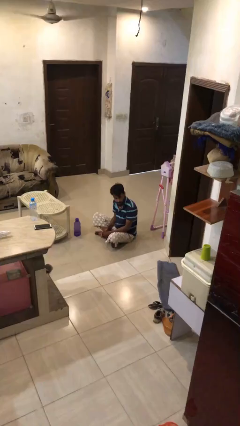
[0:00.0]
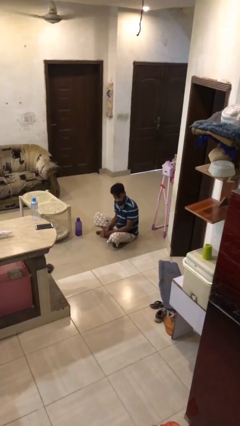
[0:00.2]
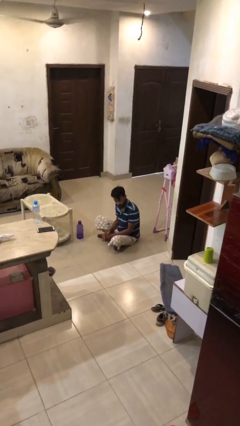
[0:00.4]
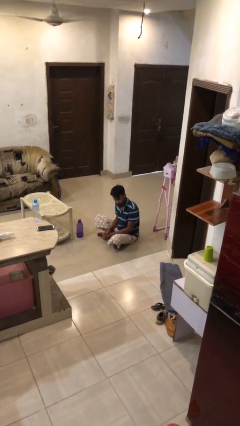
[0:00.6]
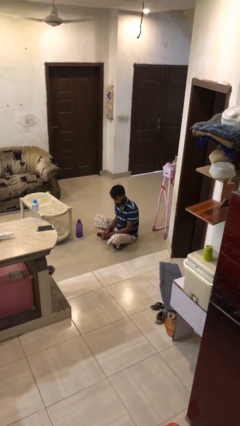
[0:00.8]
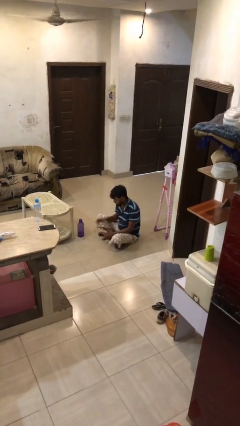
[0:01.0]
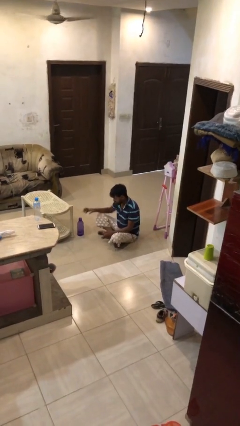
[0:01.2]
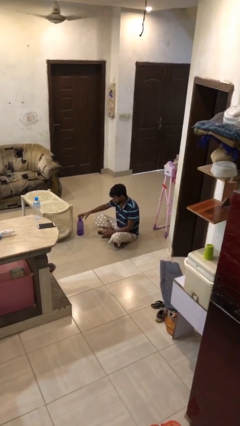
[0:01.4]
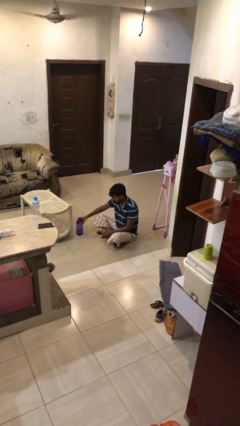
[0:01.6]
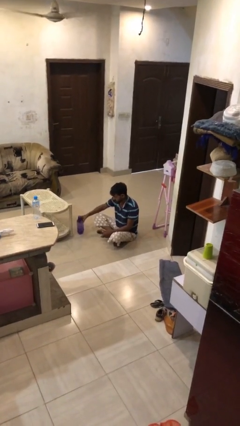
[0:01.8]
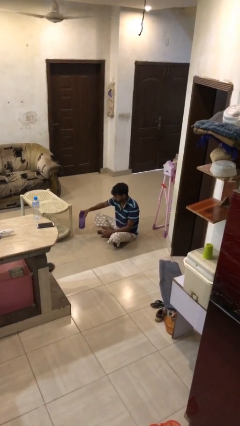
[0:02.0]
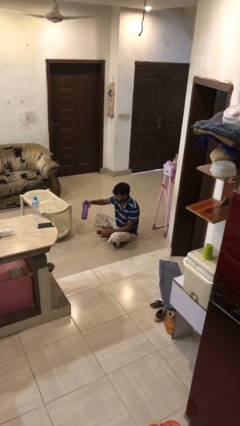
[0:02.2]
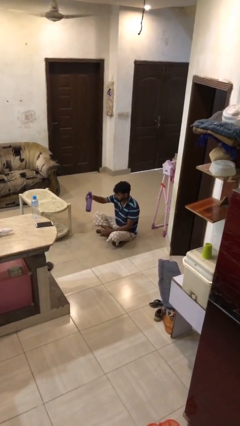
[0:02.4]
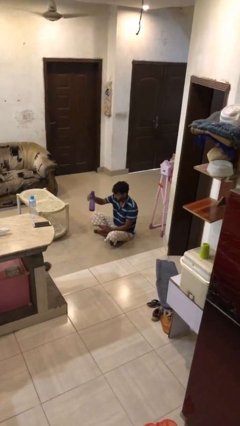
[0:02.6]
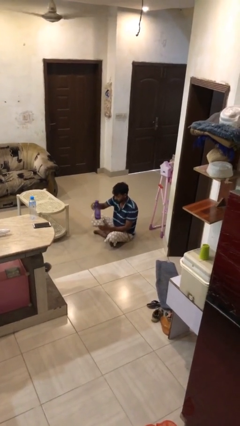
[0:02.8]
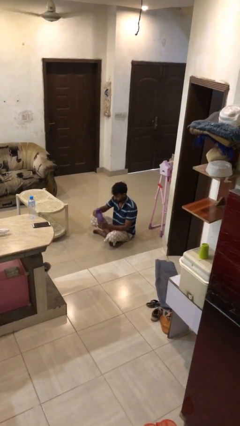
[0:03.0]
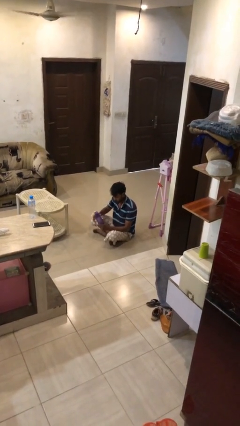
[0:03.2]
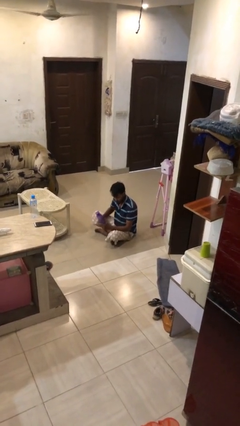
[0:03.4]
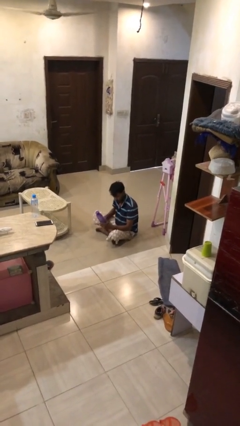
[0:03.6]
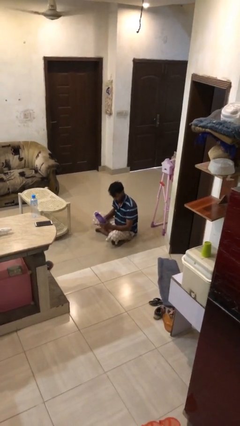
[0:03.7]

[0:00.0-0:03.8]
person picks up object from floor

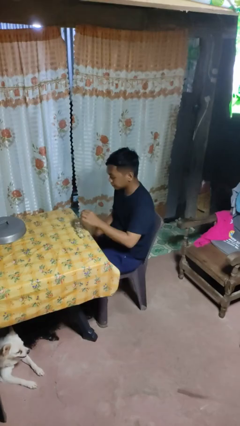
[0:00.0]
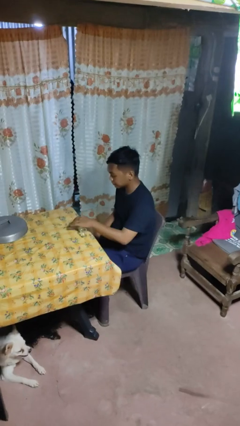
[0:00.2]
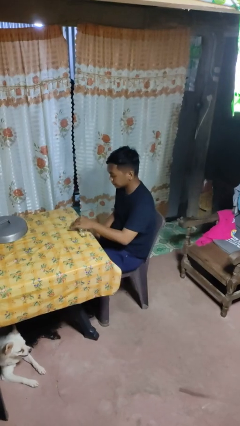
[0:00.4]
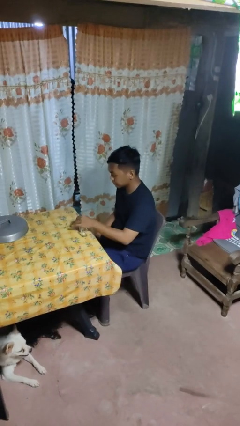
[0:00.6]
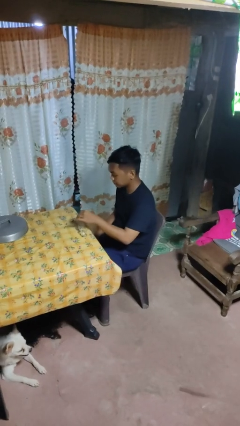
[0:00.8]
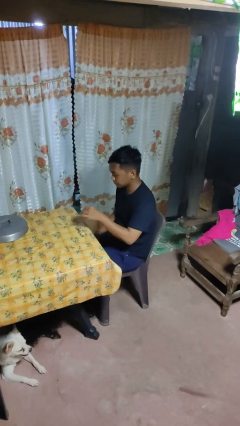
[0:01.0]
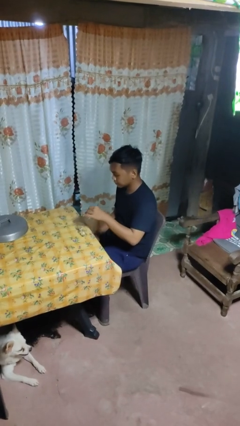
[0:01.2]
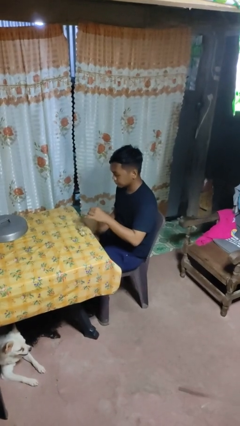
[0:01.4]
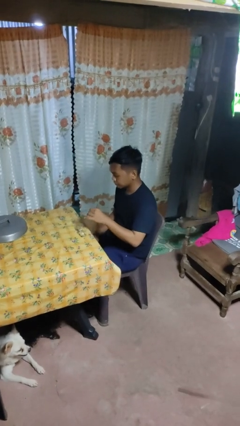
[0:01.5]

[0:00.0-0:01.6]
person picks up object from table

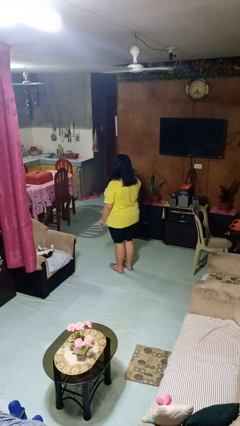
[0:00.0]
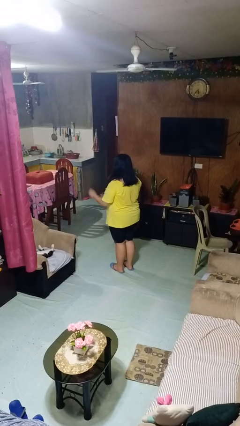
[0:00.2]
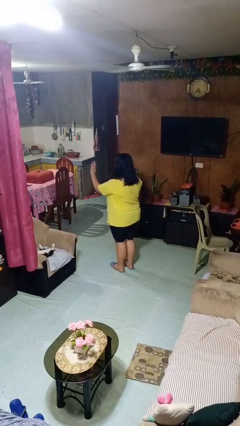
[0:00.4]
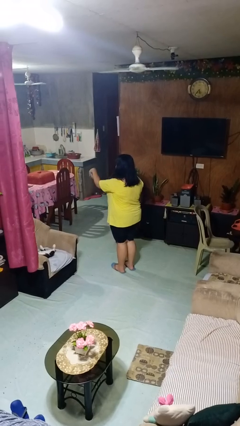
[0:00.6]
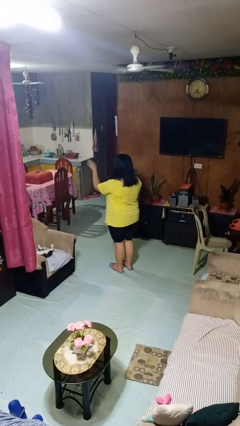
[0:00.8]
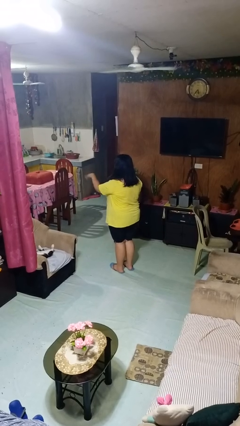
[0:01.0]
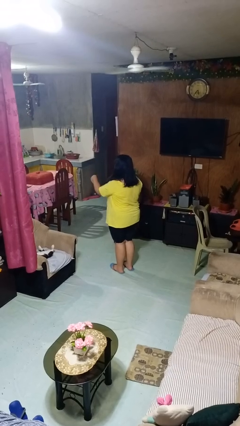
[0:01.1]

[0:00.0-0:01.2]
person gestures come here

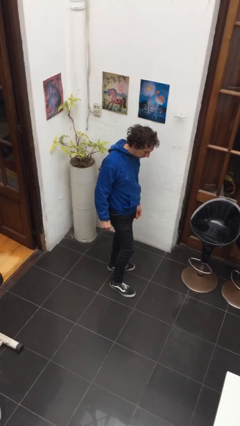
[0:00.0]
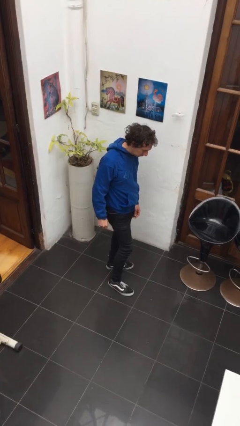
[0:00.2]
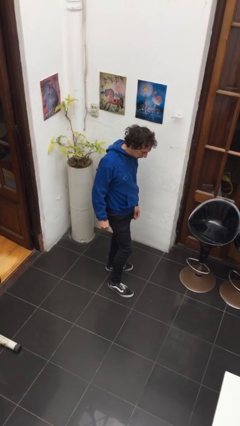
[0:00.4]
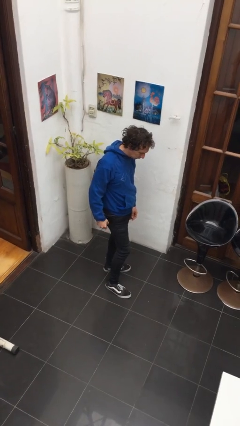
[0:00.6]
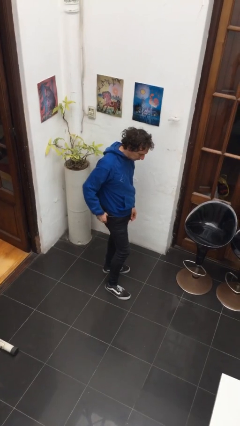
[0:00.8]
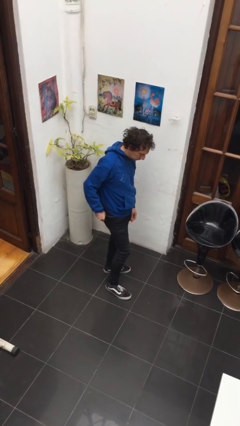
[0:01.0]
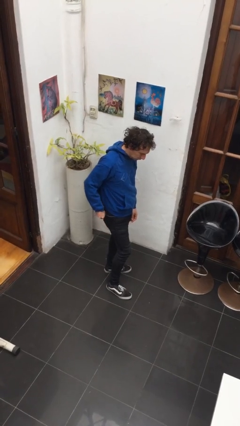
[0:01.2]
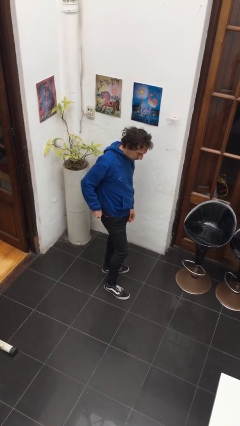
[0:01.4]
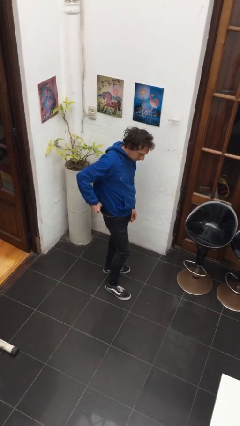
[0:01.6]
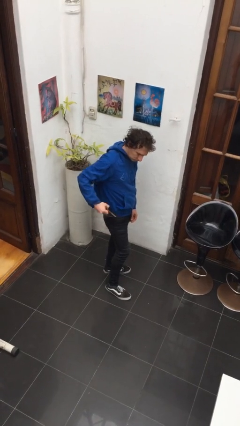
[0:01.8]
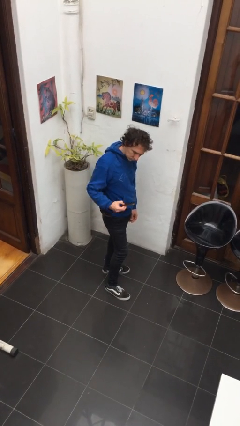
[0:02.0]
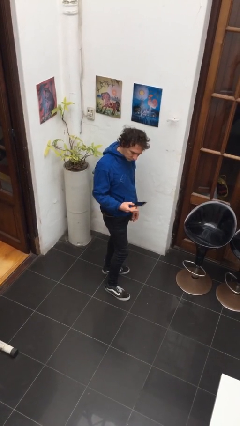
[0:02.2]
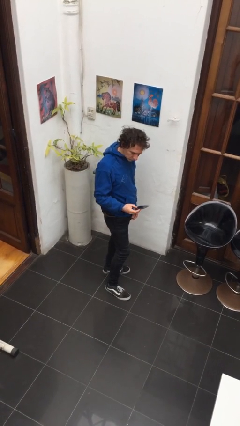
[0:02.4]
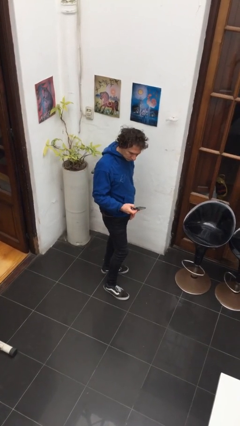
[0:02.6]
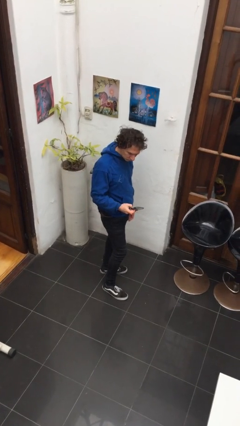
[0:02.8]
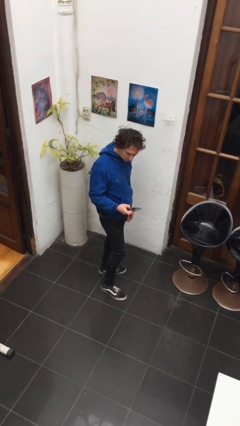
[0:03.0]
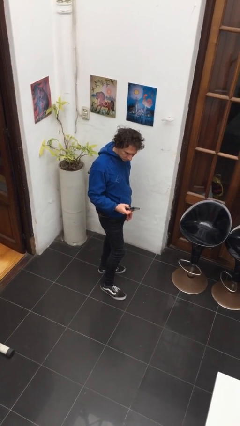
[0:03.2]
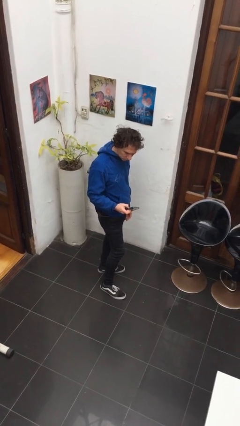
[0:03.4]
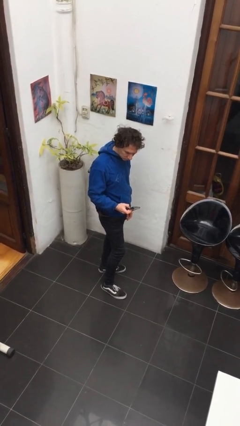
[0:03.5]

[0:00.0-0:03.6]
person takes phone from pocket

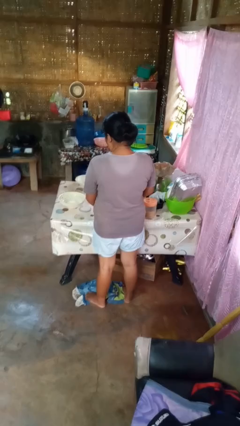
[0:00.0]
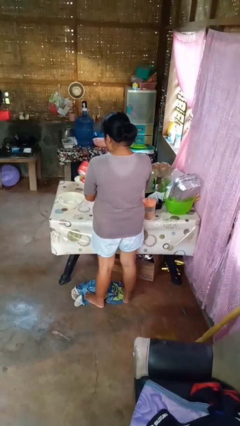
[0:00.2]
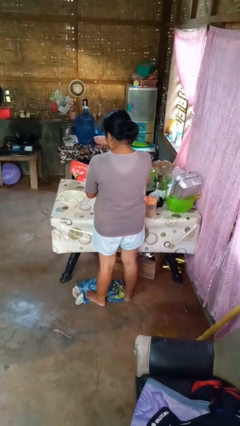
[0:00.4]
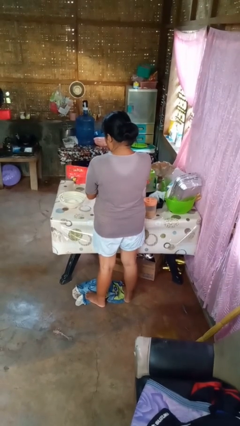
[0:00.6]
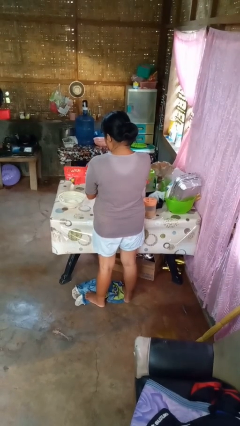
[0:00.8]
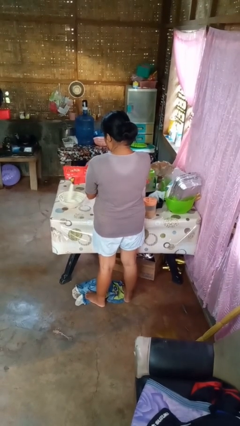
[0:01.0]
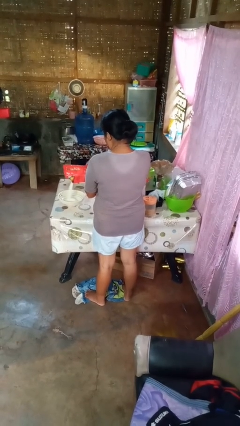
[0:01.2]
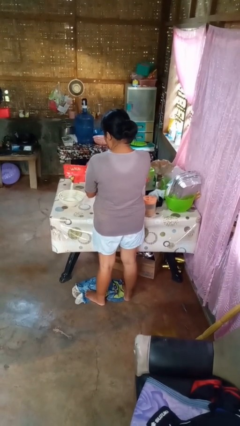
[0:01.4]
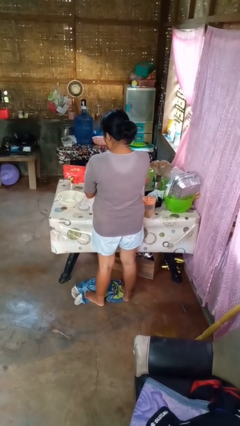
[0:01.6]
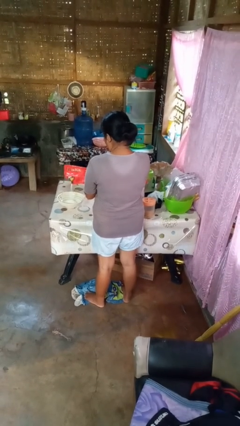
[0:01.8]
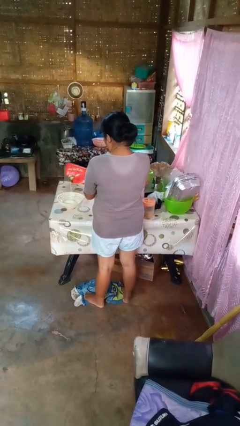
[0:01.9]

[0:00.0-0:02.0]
person pours into bowl

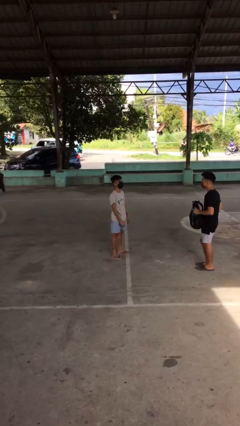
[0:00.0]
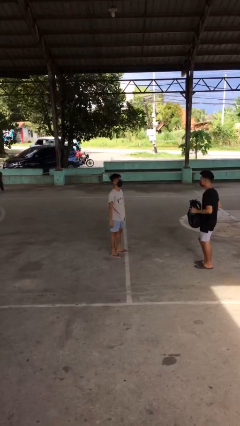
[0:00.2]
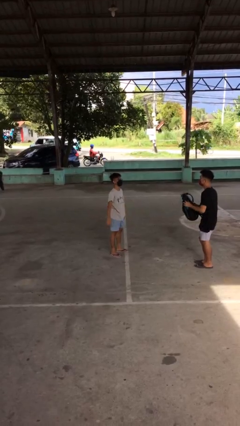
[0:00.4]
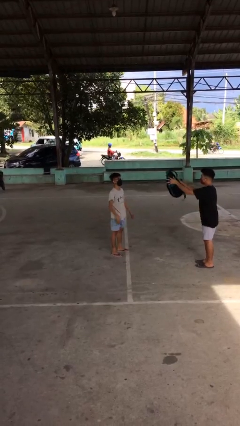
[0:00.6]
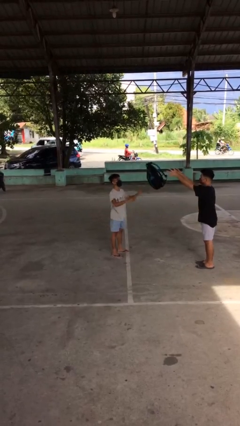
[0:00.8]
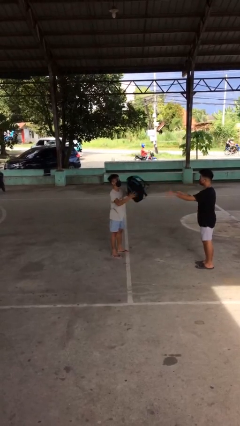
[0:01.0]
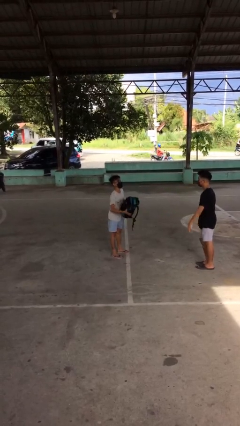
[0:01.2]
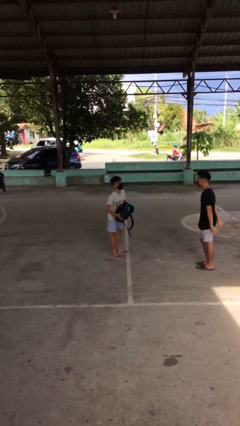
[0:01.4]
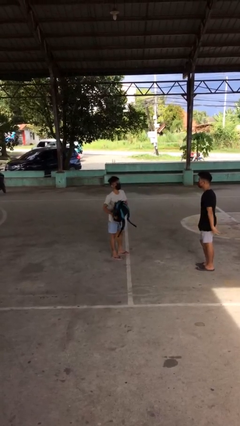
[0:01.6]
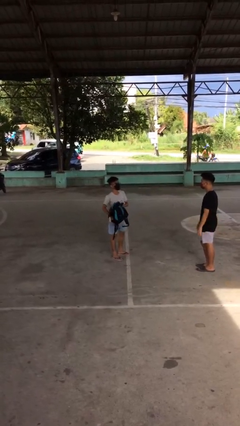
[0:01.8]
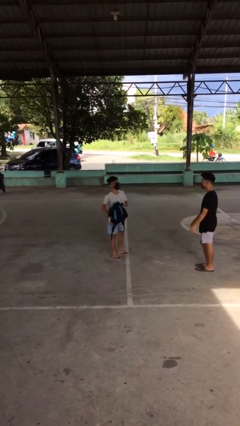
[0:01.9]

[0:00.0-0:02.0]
person catches object from person

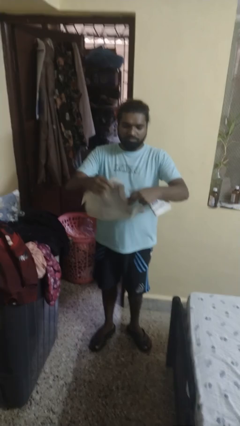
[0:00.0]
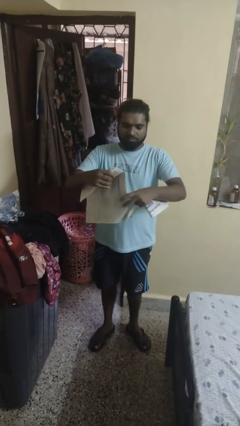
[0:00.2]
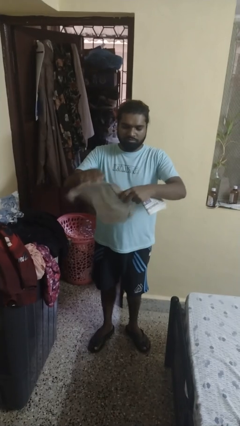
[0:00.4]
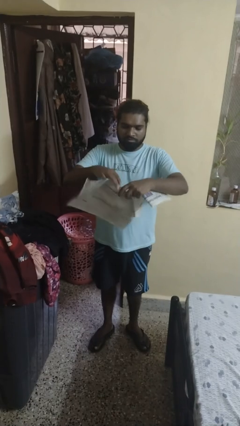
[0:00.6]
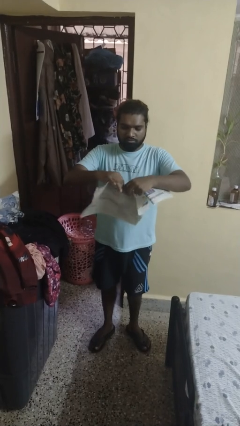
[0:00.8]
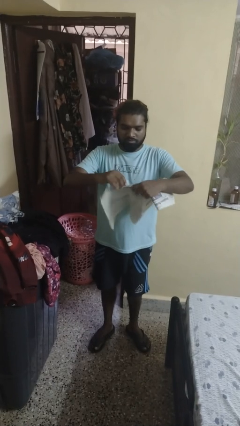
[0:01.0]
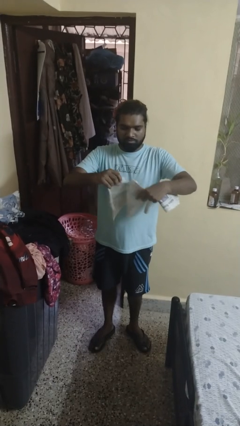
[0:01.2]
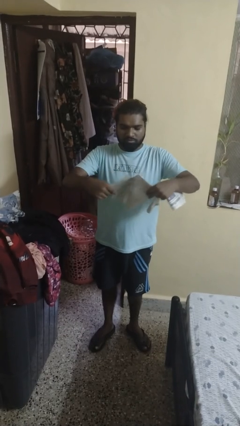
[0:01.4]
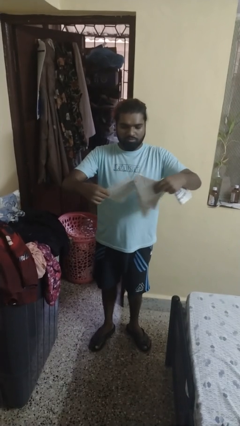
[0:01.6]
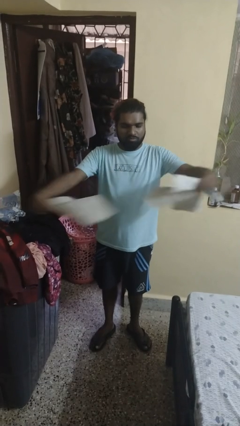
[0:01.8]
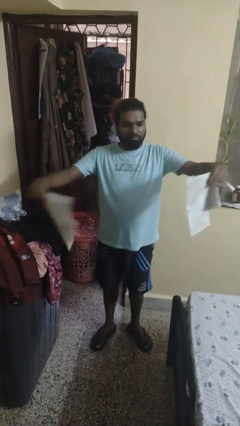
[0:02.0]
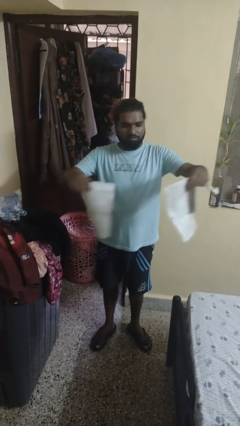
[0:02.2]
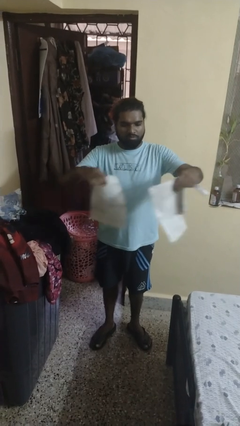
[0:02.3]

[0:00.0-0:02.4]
person tears paper
